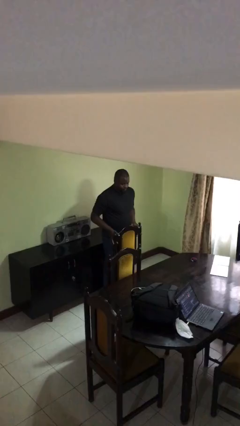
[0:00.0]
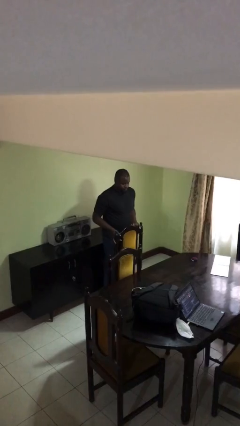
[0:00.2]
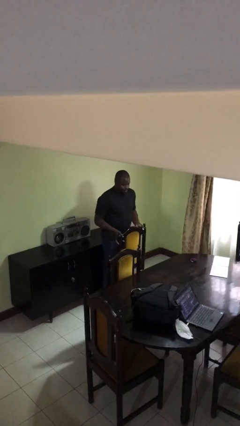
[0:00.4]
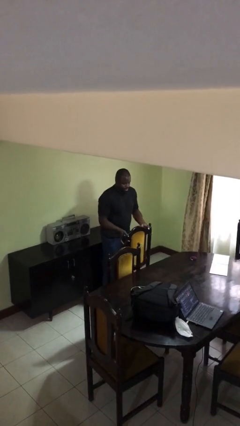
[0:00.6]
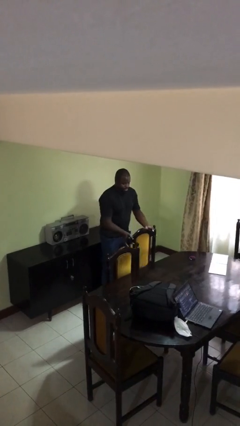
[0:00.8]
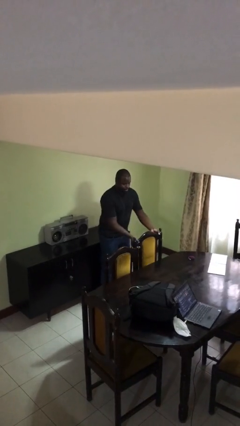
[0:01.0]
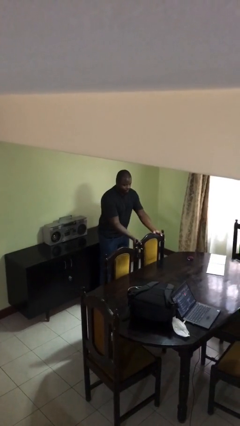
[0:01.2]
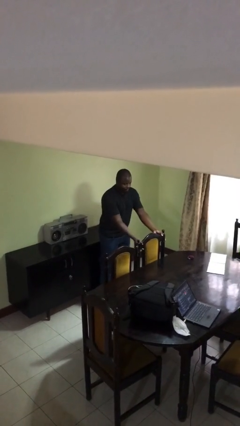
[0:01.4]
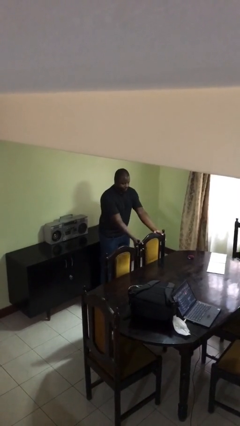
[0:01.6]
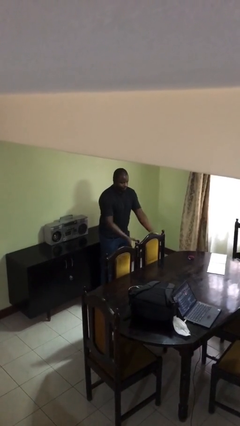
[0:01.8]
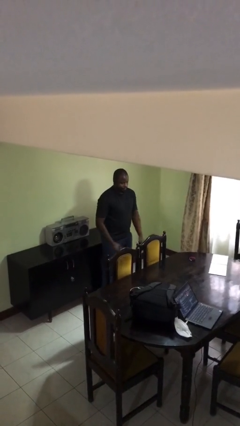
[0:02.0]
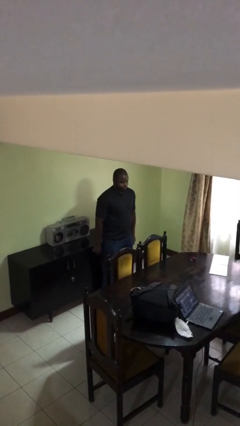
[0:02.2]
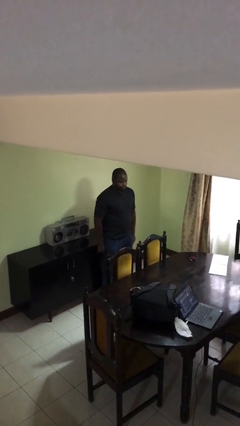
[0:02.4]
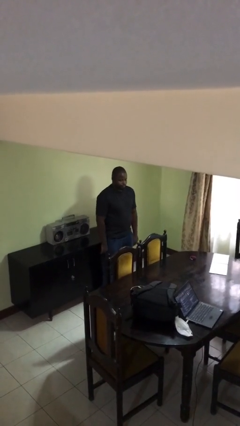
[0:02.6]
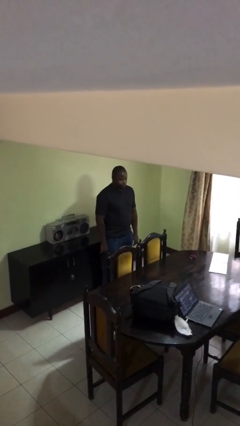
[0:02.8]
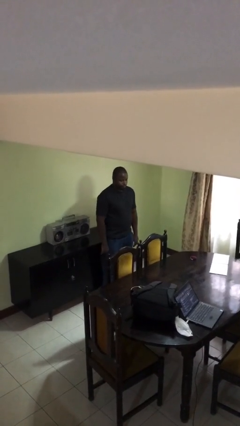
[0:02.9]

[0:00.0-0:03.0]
person pushes in chair

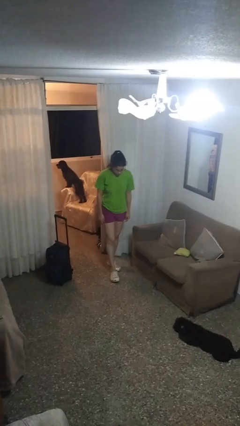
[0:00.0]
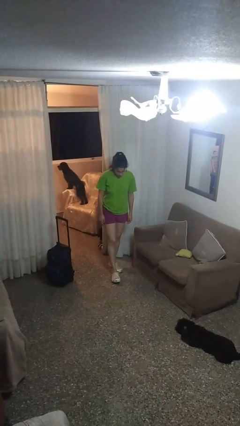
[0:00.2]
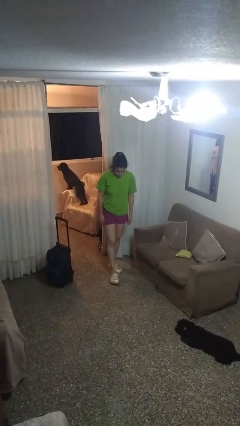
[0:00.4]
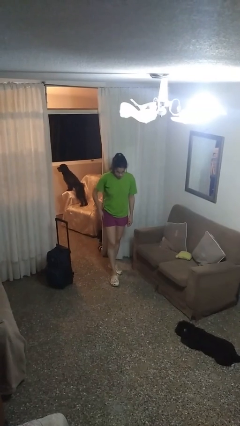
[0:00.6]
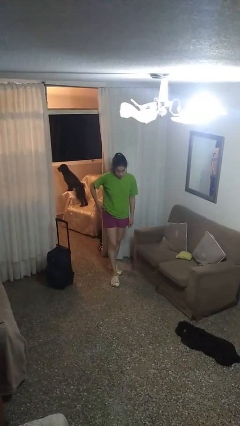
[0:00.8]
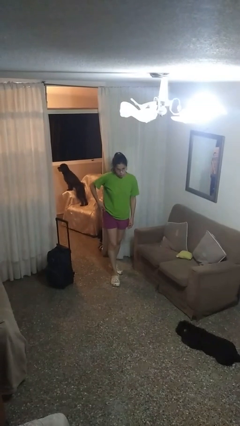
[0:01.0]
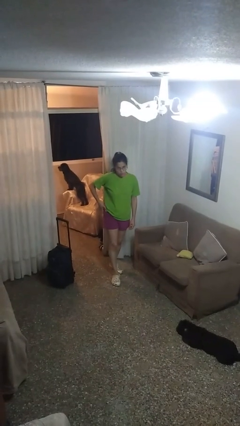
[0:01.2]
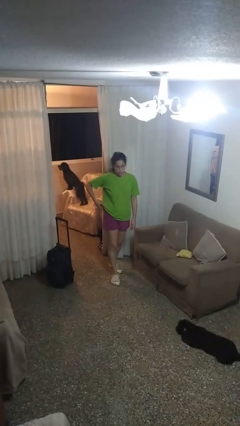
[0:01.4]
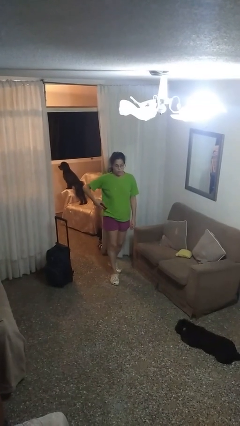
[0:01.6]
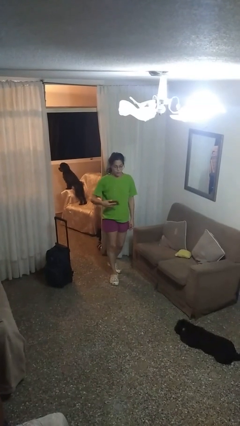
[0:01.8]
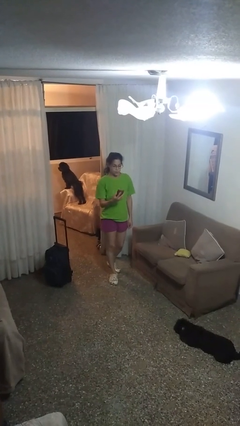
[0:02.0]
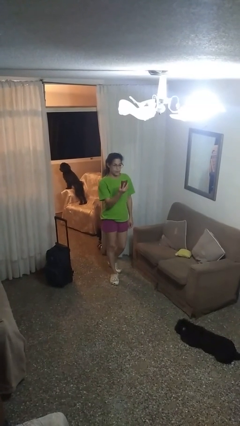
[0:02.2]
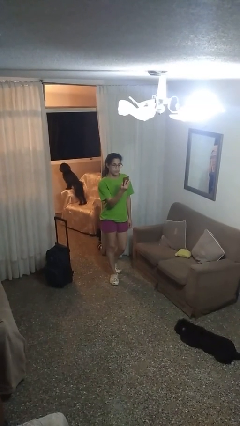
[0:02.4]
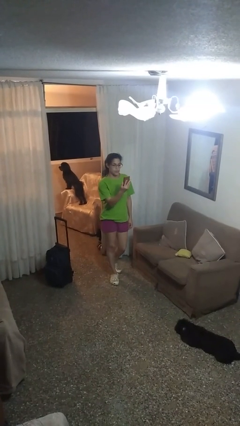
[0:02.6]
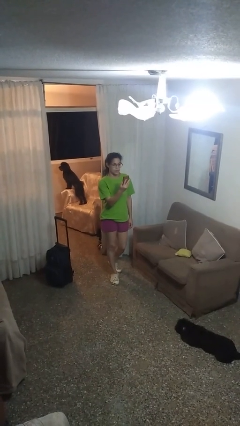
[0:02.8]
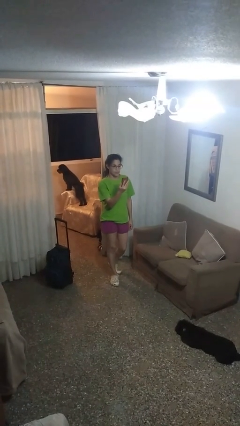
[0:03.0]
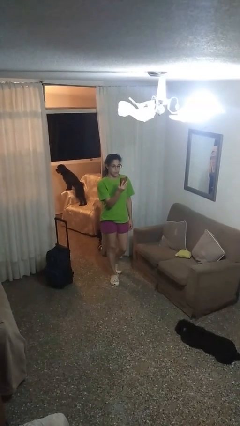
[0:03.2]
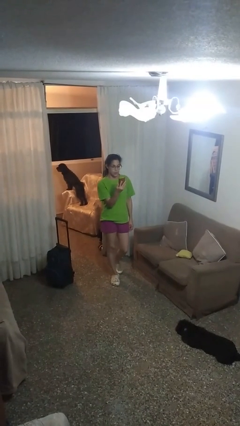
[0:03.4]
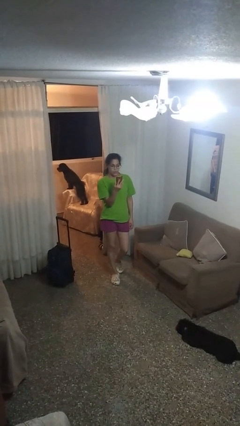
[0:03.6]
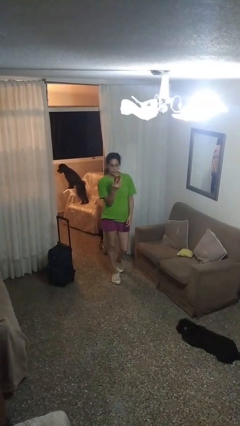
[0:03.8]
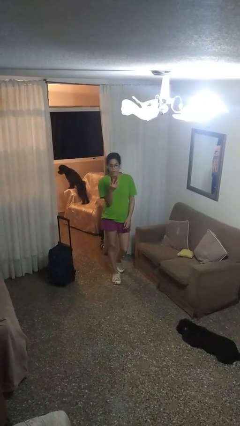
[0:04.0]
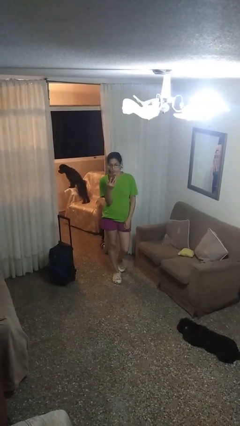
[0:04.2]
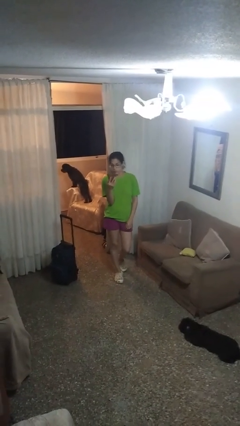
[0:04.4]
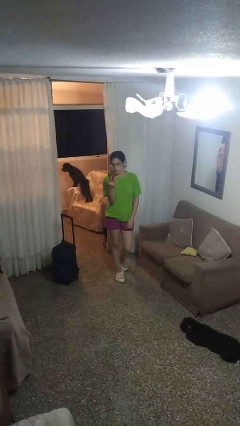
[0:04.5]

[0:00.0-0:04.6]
person takes phone from pocket

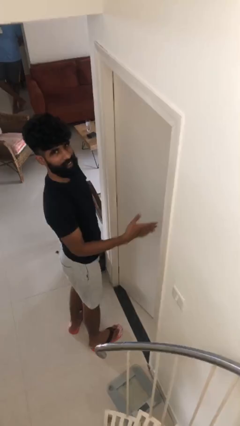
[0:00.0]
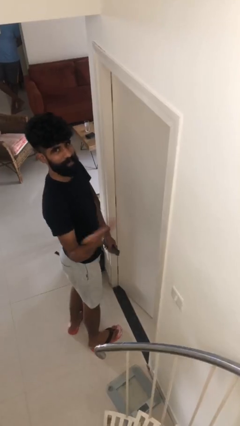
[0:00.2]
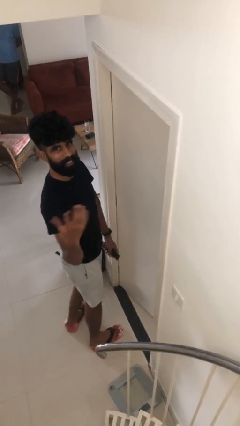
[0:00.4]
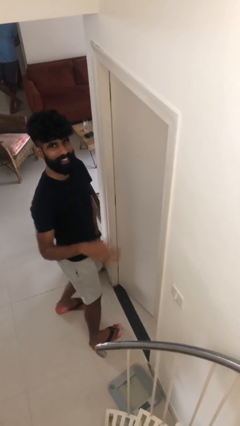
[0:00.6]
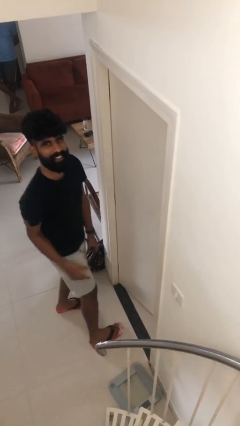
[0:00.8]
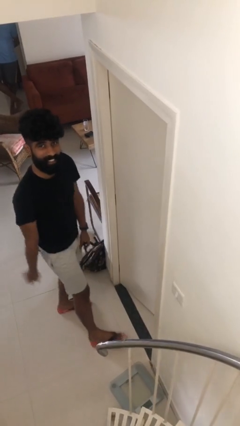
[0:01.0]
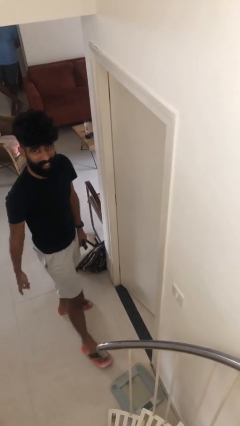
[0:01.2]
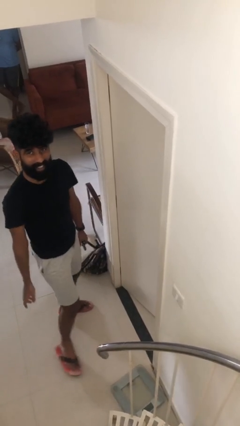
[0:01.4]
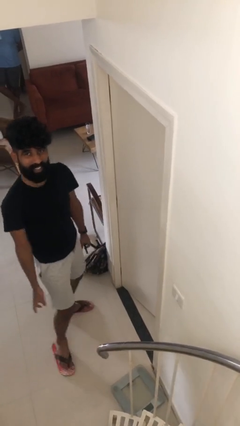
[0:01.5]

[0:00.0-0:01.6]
person closes facility door

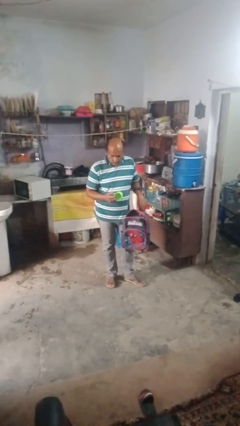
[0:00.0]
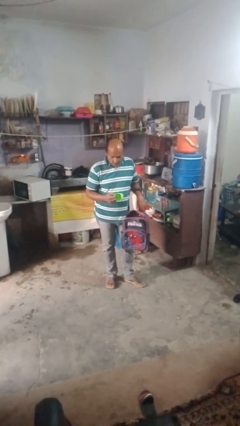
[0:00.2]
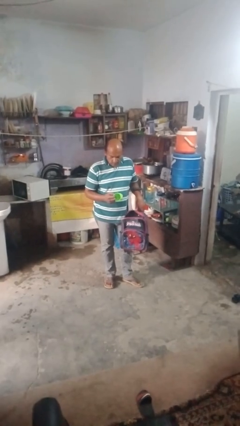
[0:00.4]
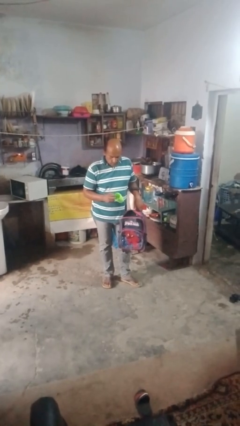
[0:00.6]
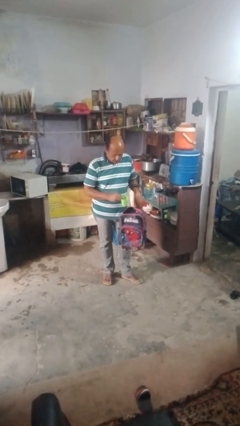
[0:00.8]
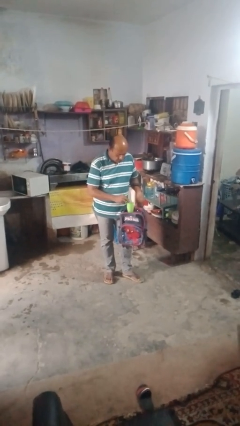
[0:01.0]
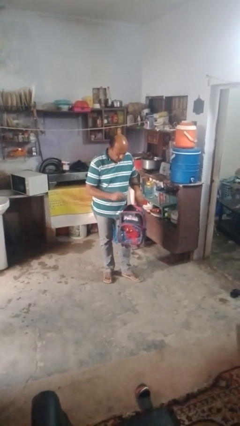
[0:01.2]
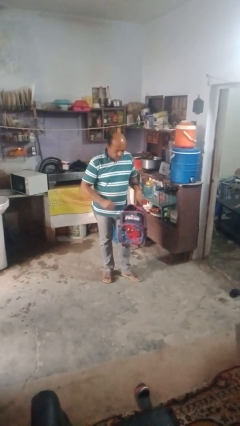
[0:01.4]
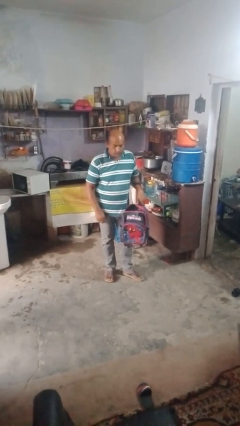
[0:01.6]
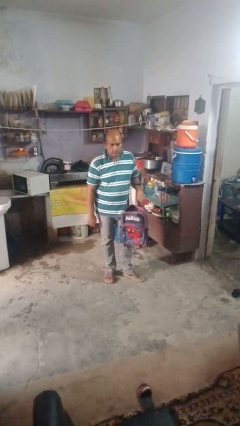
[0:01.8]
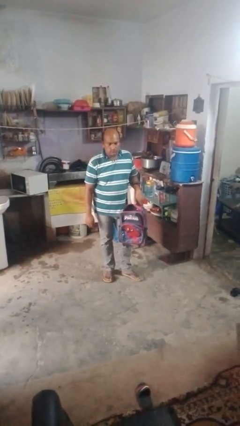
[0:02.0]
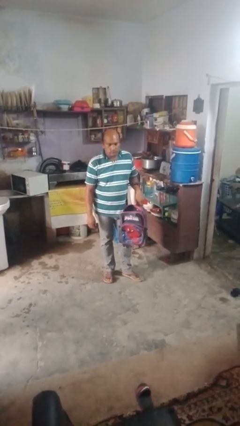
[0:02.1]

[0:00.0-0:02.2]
person puts object into bag

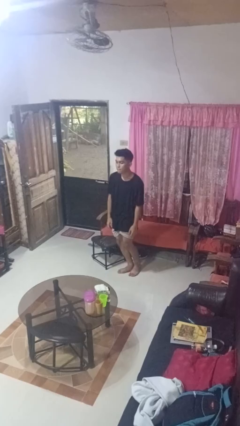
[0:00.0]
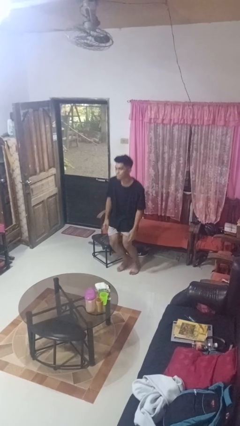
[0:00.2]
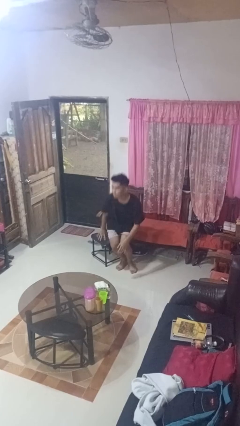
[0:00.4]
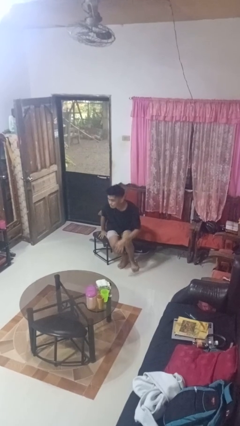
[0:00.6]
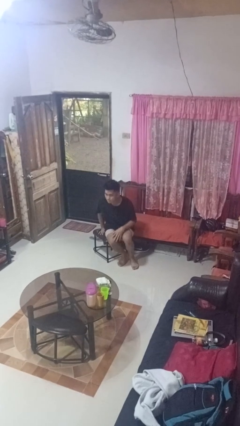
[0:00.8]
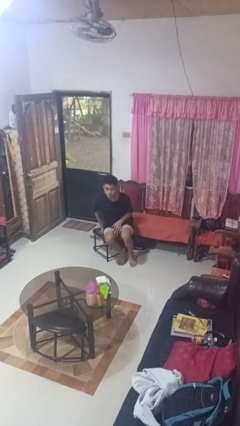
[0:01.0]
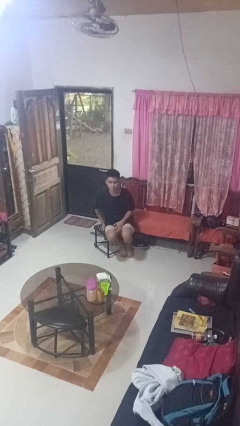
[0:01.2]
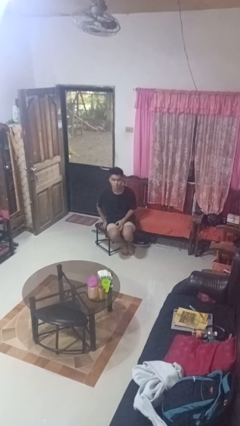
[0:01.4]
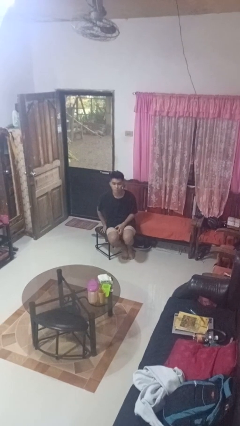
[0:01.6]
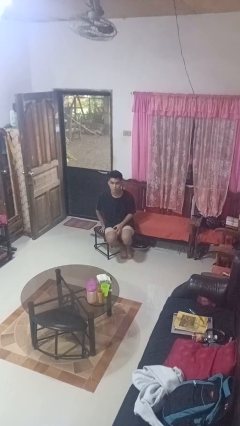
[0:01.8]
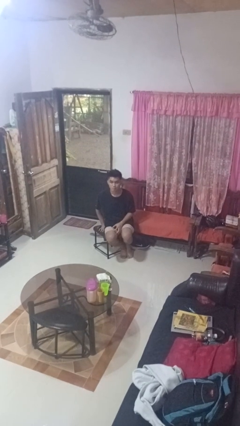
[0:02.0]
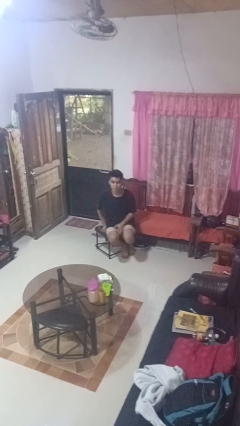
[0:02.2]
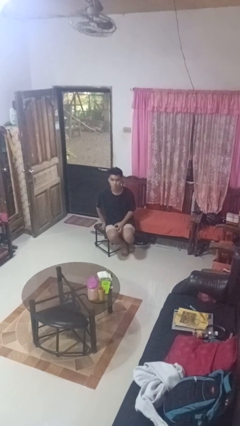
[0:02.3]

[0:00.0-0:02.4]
person sits down

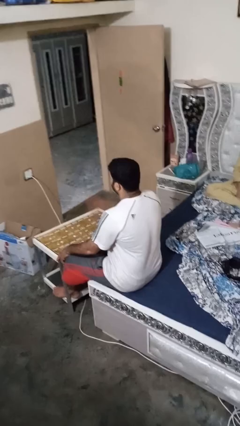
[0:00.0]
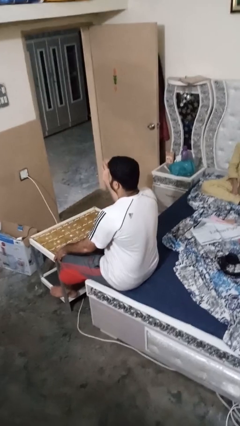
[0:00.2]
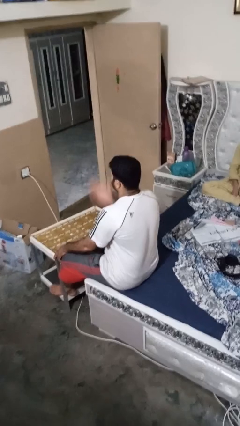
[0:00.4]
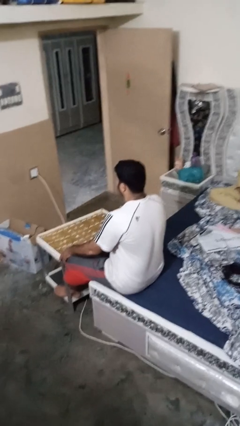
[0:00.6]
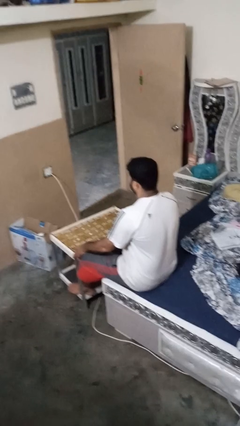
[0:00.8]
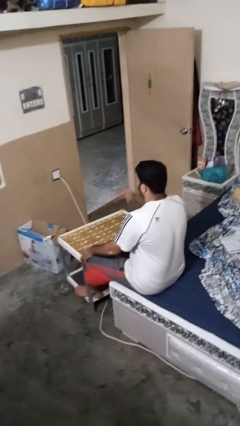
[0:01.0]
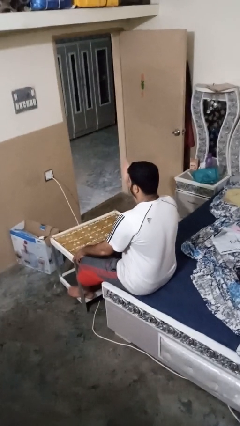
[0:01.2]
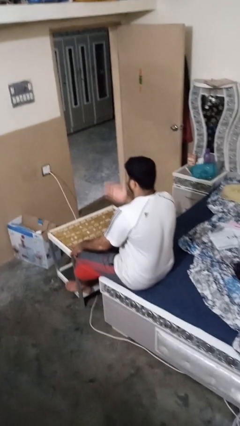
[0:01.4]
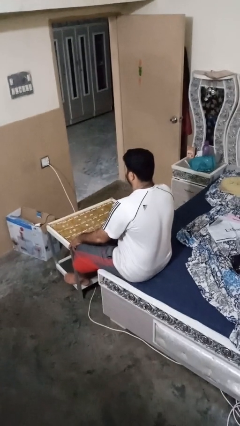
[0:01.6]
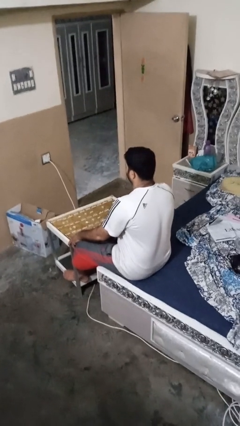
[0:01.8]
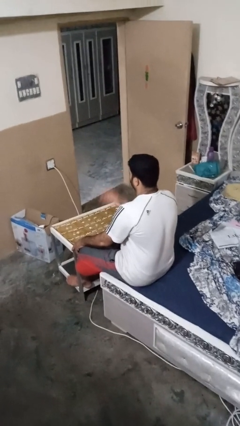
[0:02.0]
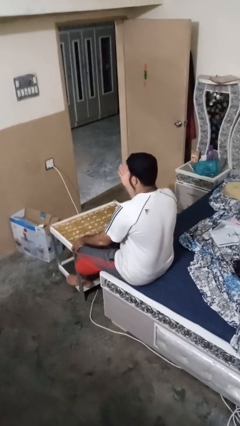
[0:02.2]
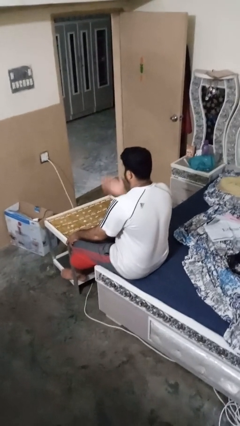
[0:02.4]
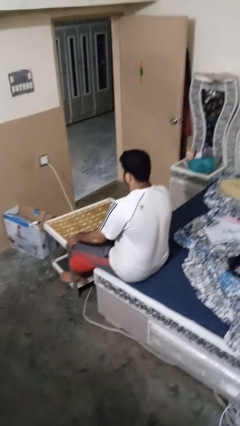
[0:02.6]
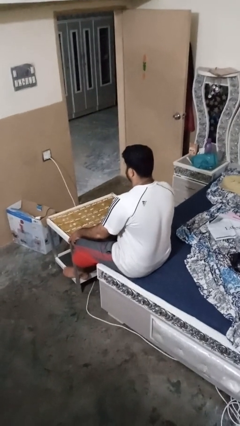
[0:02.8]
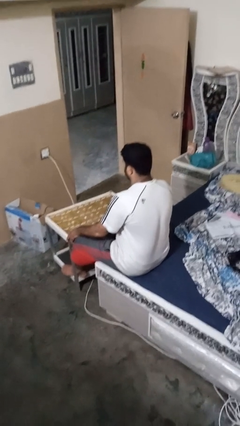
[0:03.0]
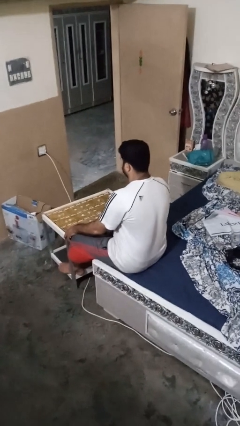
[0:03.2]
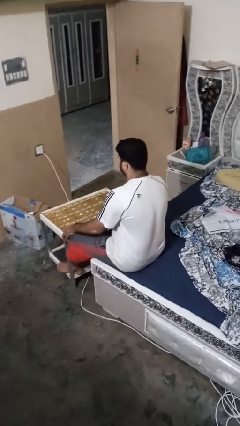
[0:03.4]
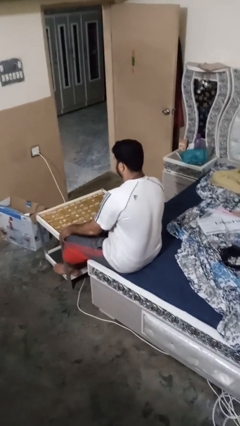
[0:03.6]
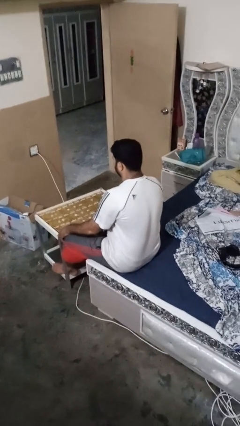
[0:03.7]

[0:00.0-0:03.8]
person drums on chest
